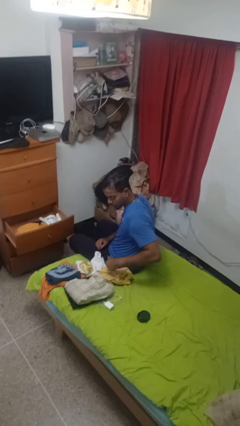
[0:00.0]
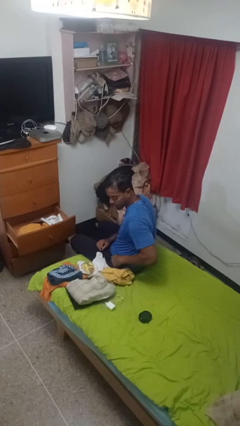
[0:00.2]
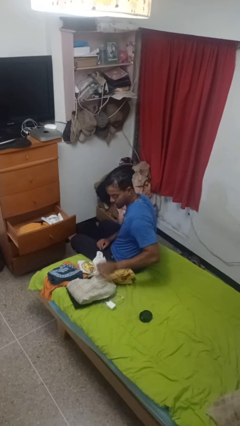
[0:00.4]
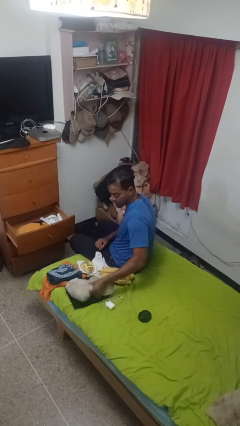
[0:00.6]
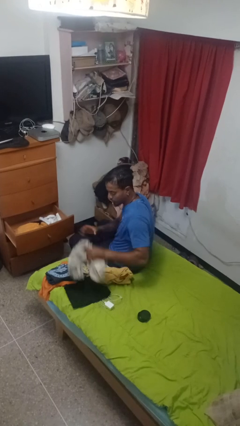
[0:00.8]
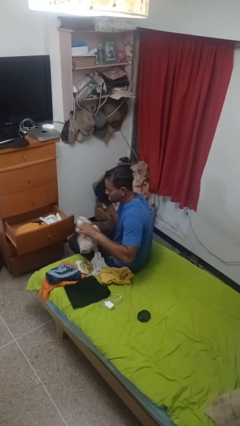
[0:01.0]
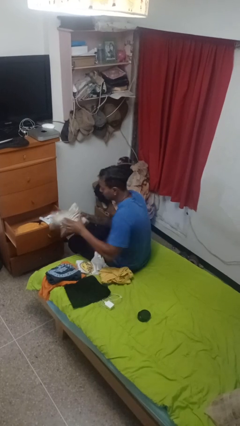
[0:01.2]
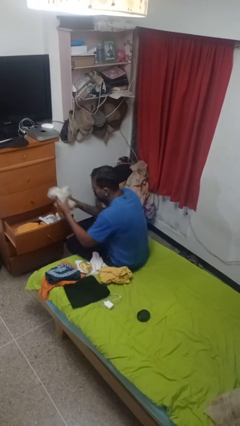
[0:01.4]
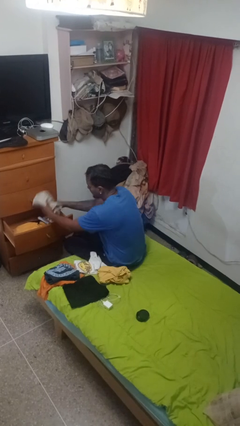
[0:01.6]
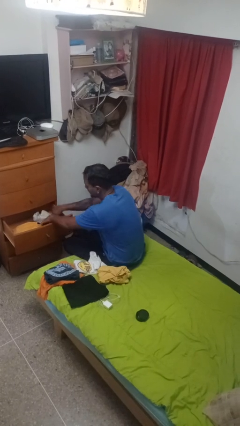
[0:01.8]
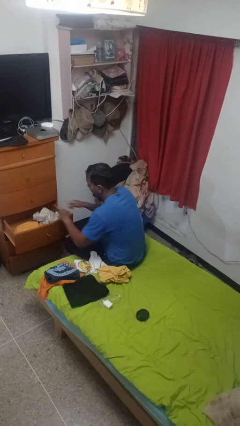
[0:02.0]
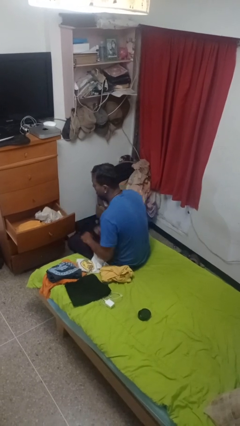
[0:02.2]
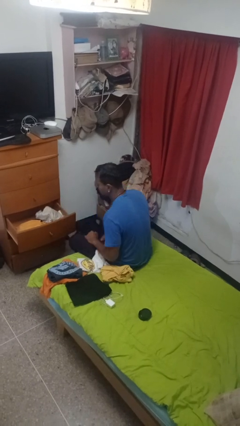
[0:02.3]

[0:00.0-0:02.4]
person puts clothes into dresser

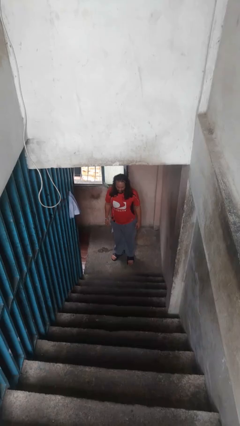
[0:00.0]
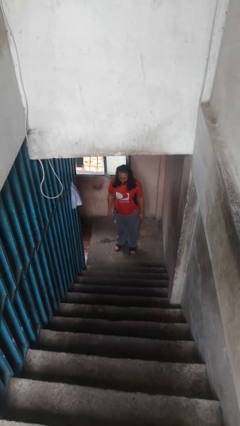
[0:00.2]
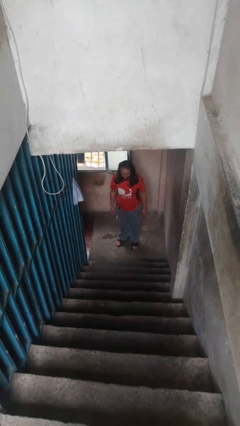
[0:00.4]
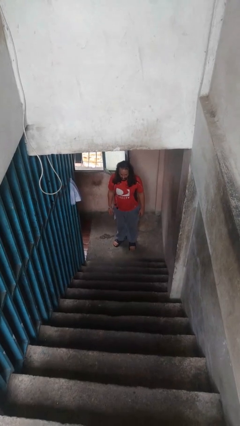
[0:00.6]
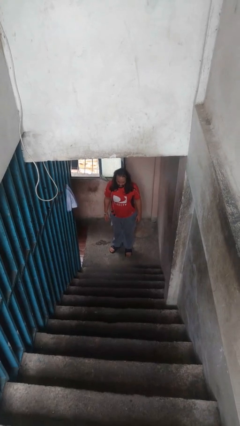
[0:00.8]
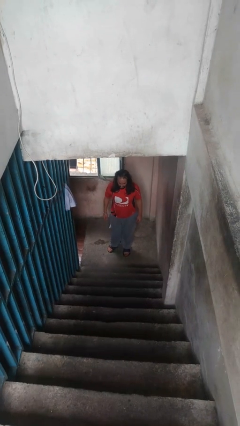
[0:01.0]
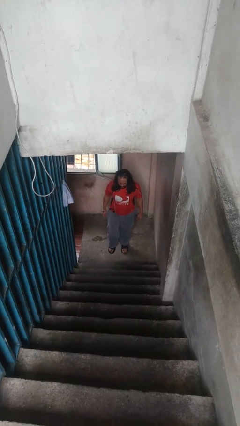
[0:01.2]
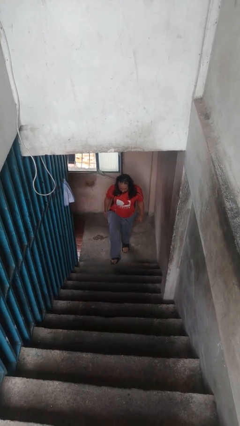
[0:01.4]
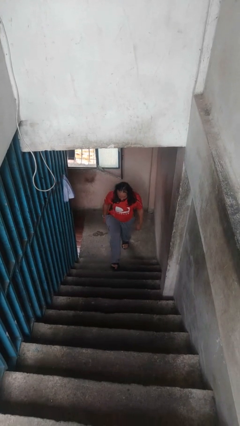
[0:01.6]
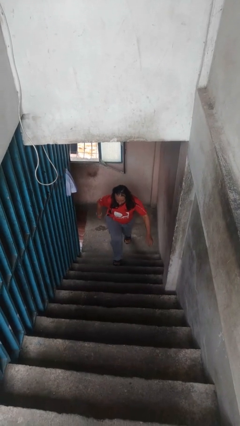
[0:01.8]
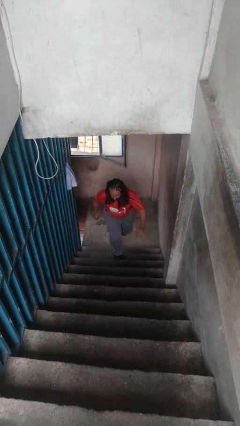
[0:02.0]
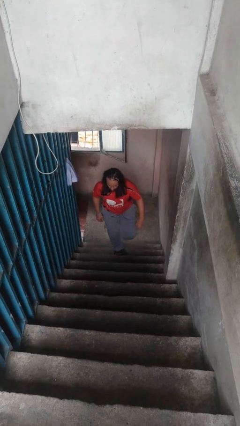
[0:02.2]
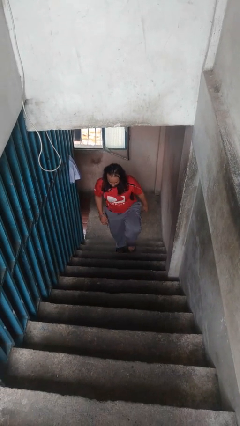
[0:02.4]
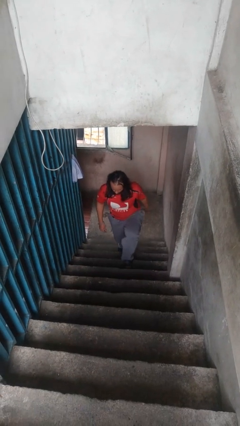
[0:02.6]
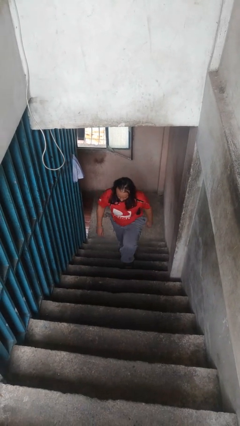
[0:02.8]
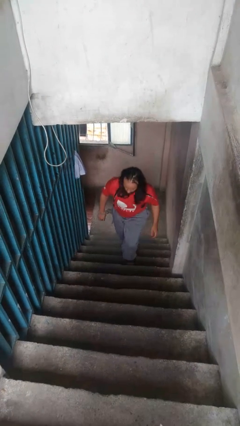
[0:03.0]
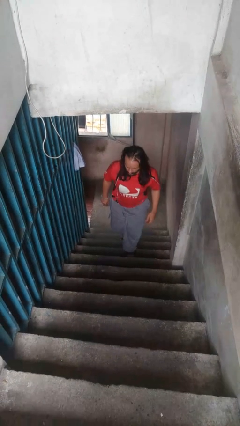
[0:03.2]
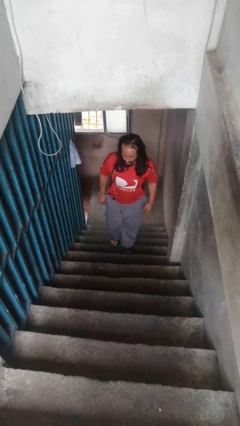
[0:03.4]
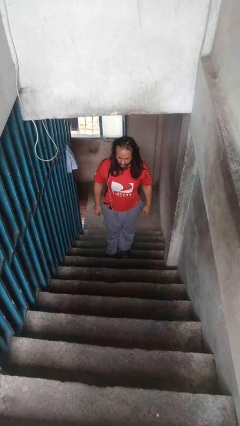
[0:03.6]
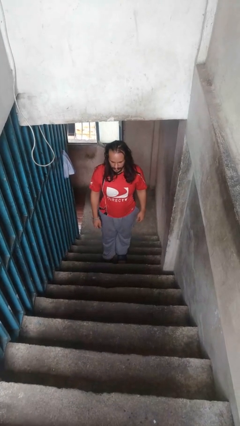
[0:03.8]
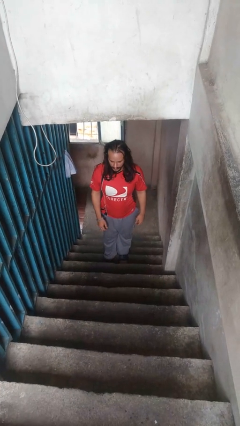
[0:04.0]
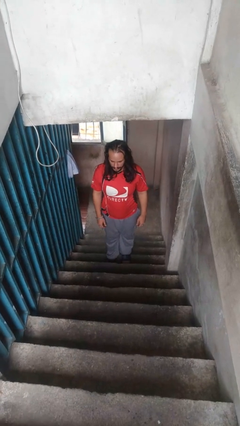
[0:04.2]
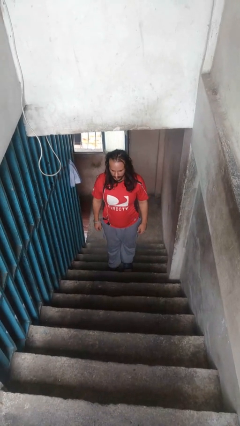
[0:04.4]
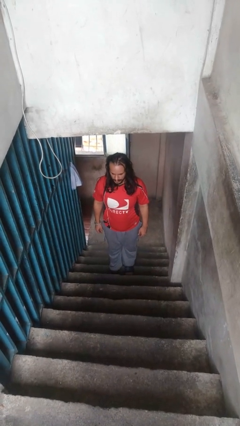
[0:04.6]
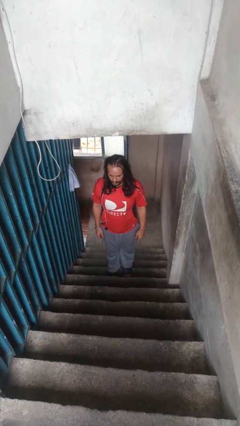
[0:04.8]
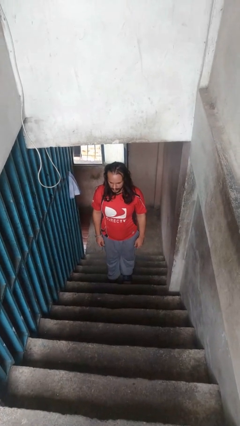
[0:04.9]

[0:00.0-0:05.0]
person climbs up stairs

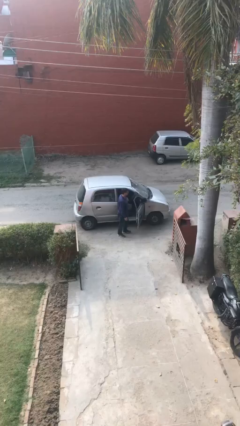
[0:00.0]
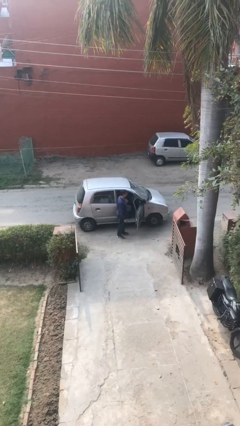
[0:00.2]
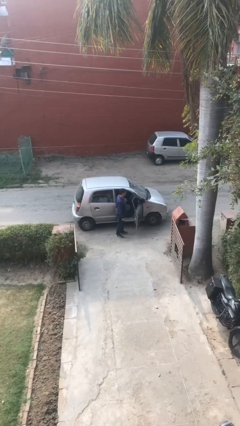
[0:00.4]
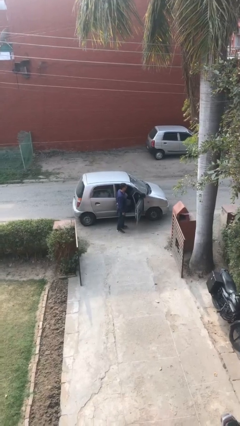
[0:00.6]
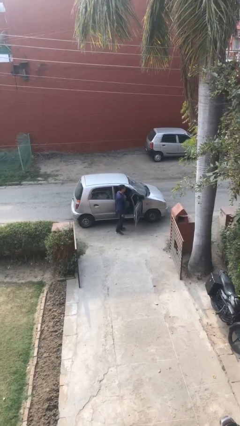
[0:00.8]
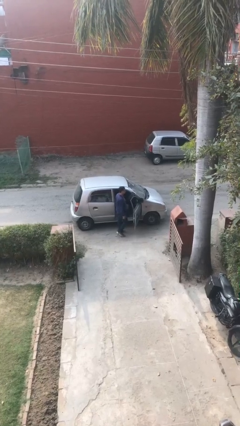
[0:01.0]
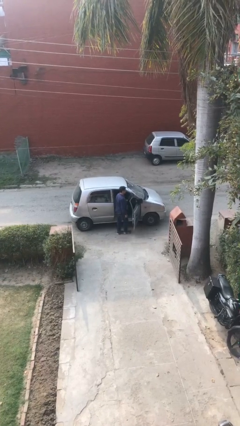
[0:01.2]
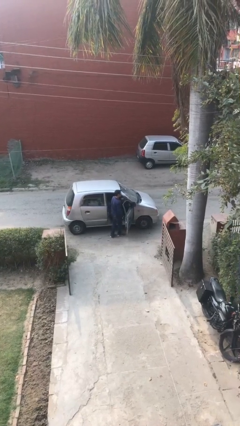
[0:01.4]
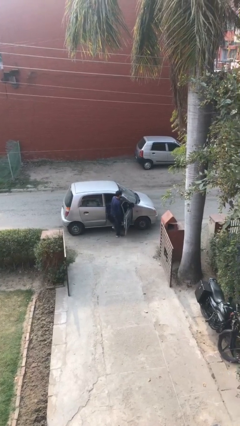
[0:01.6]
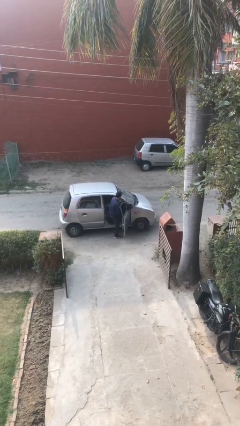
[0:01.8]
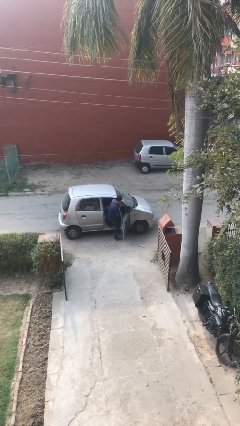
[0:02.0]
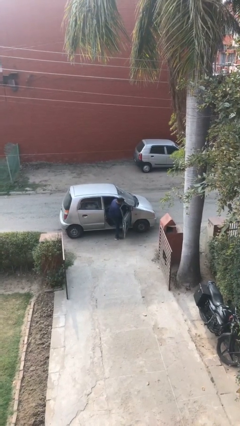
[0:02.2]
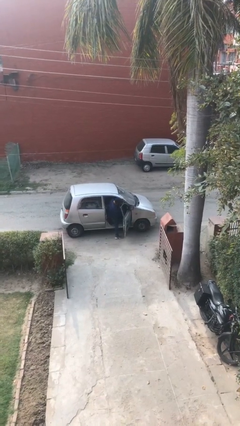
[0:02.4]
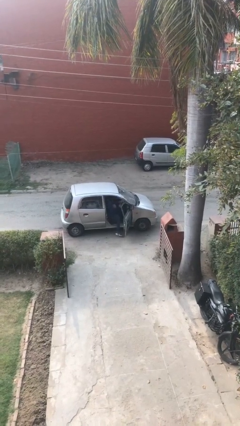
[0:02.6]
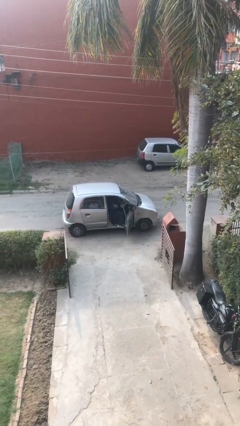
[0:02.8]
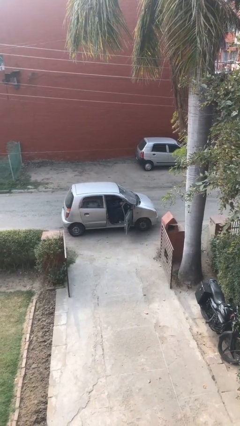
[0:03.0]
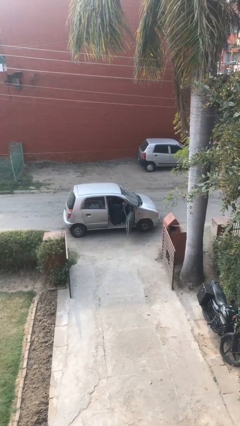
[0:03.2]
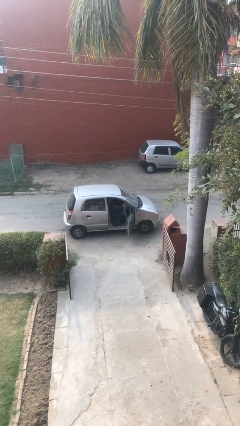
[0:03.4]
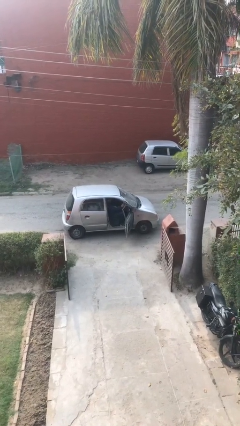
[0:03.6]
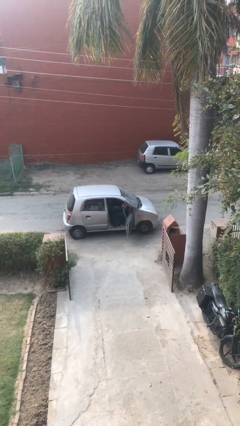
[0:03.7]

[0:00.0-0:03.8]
person enters car

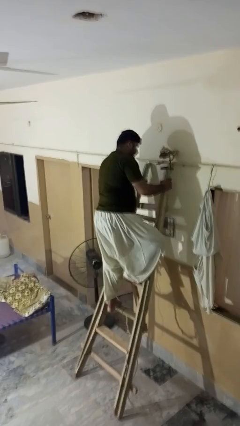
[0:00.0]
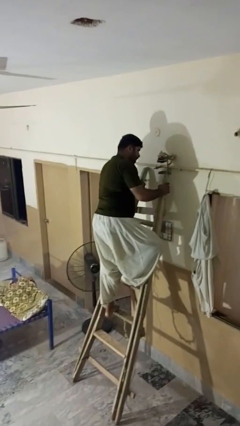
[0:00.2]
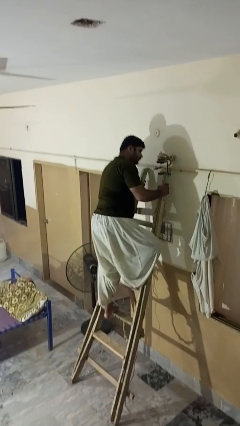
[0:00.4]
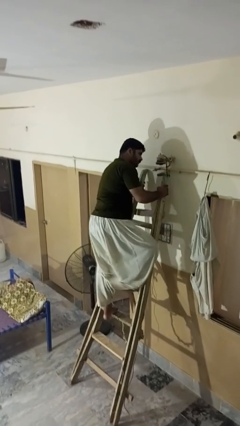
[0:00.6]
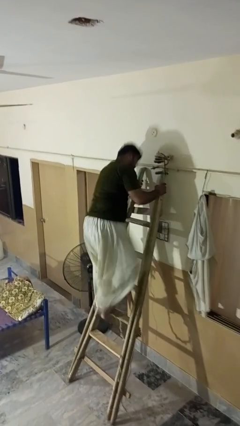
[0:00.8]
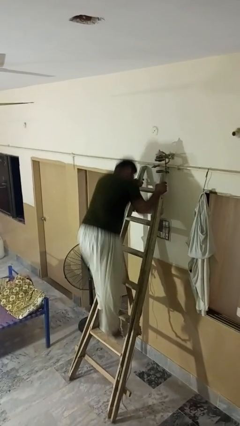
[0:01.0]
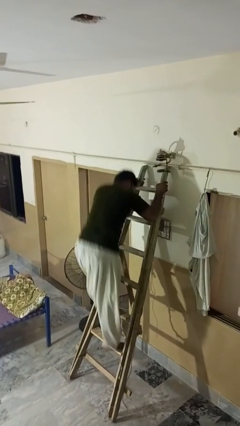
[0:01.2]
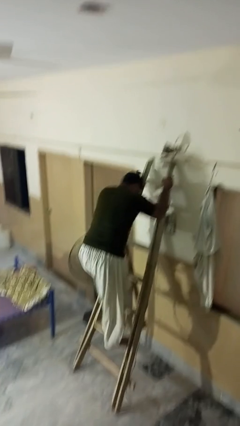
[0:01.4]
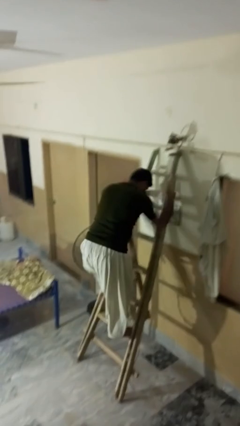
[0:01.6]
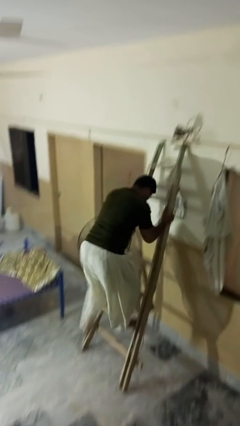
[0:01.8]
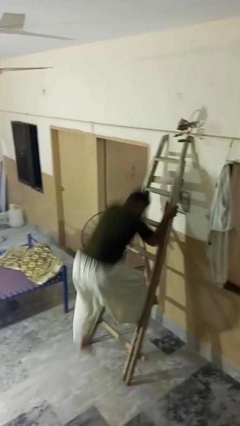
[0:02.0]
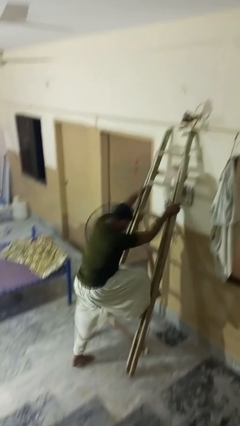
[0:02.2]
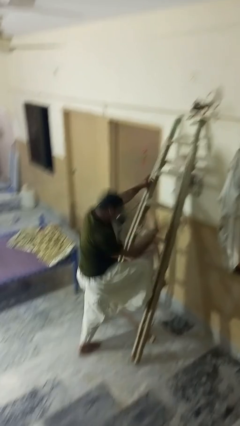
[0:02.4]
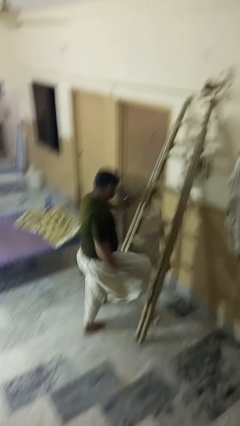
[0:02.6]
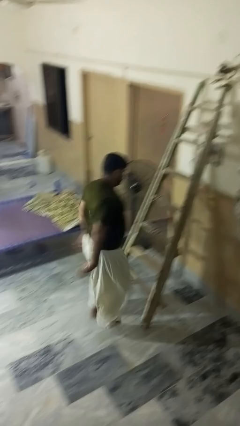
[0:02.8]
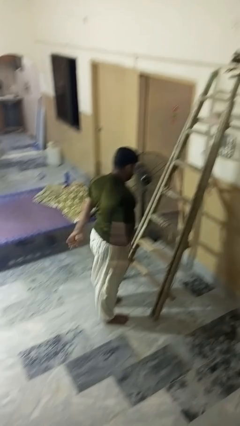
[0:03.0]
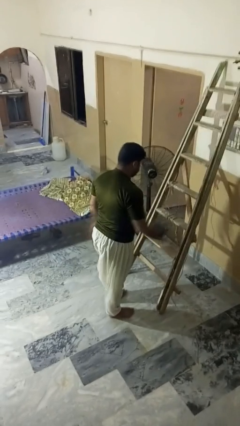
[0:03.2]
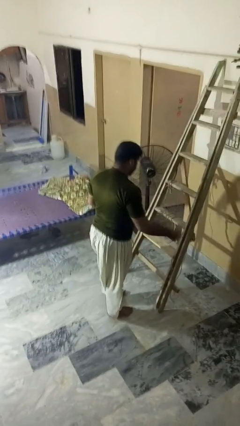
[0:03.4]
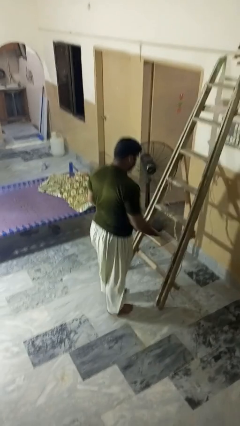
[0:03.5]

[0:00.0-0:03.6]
person climbs down ladder

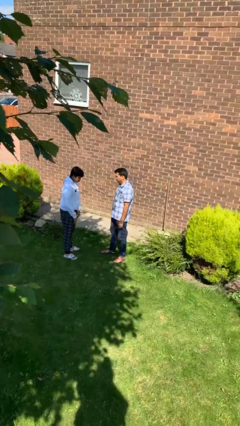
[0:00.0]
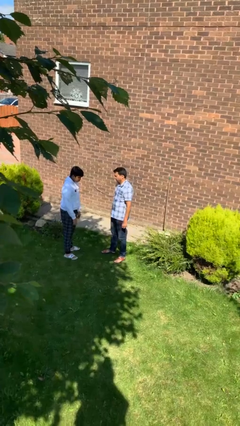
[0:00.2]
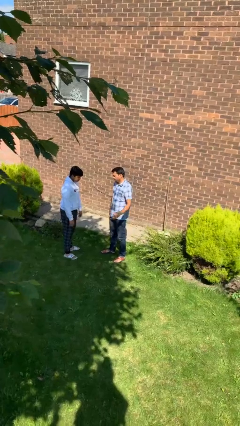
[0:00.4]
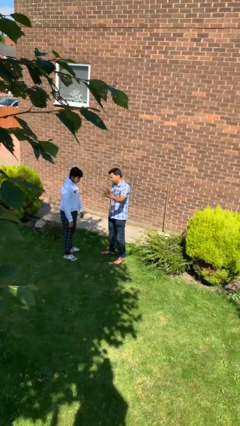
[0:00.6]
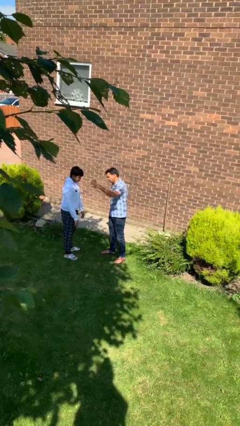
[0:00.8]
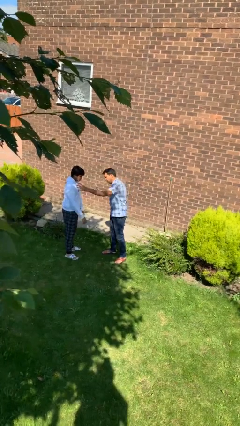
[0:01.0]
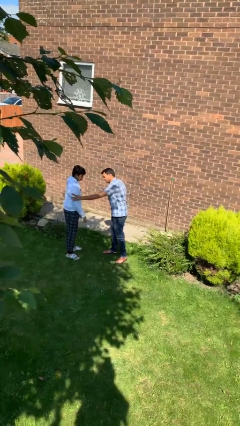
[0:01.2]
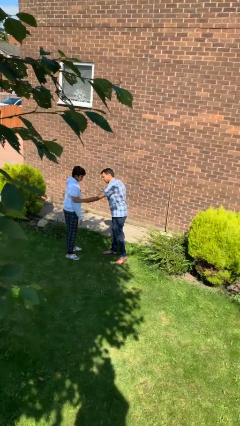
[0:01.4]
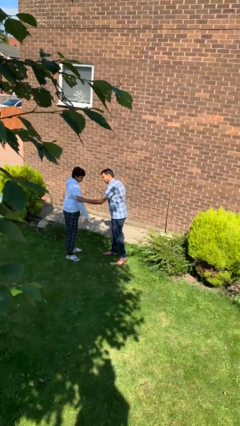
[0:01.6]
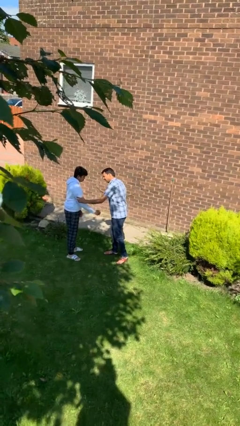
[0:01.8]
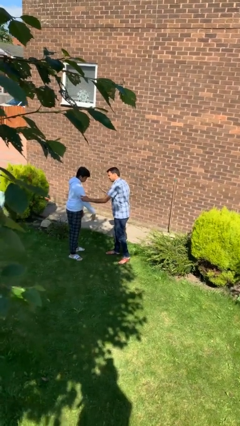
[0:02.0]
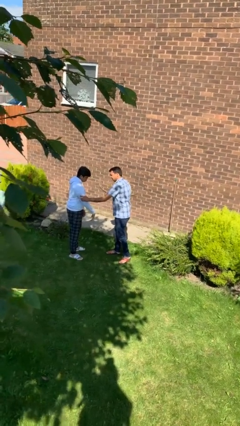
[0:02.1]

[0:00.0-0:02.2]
person grabs person by bicep

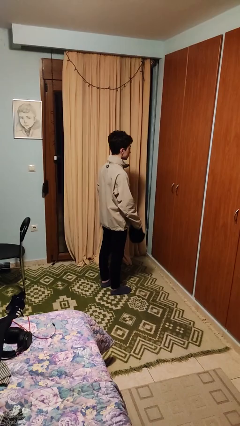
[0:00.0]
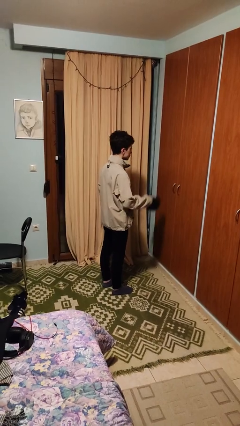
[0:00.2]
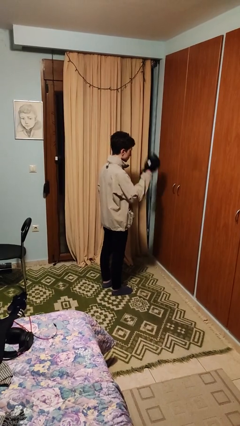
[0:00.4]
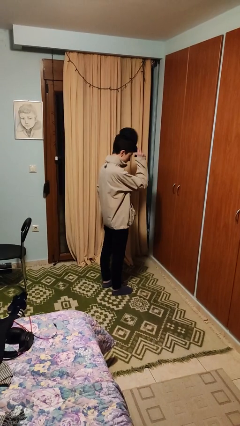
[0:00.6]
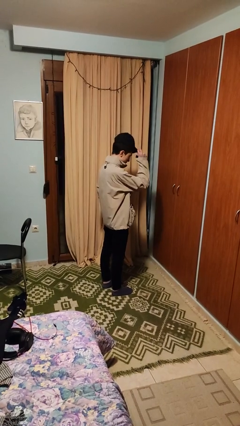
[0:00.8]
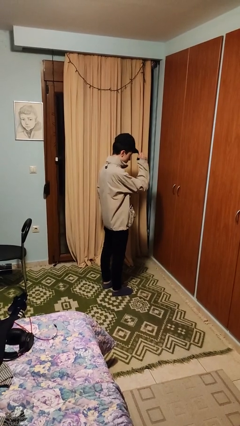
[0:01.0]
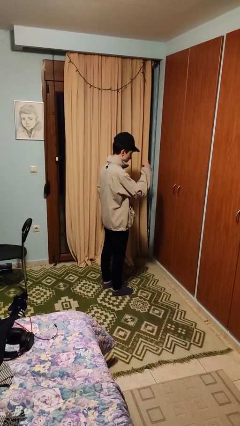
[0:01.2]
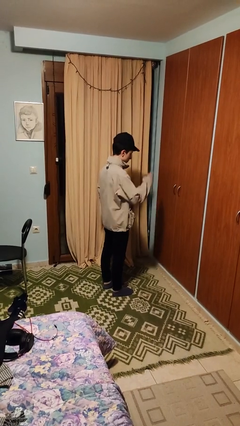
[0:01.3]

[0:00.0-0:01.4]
person puts on hat
